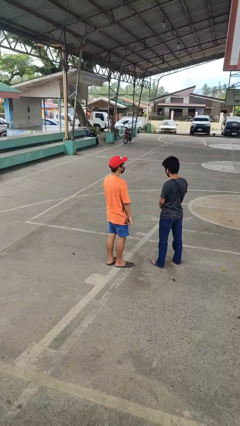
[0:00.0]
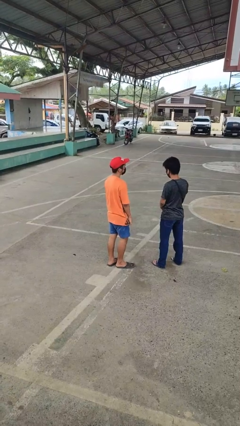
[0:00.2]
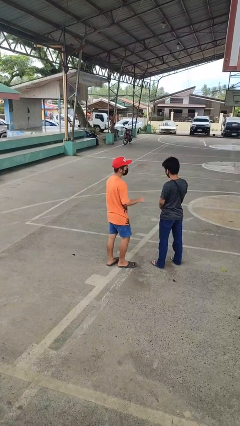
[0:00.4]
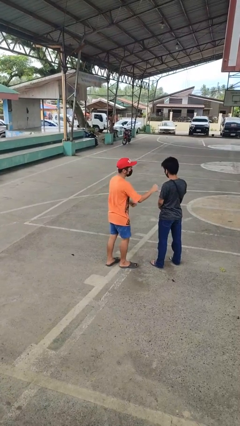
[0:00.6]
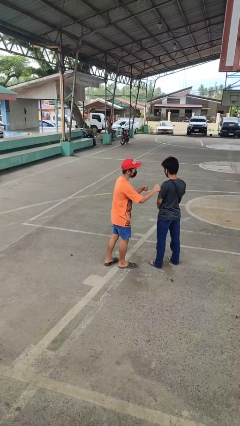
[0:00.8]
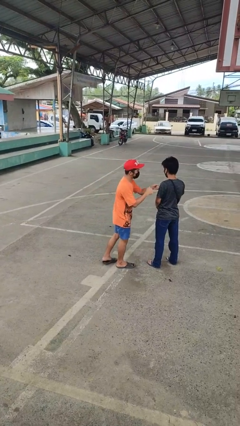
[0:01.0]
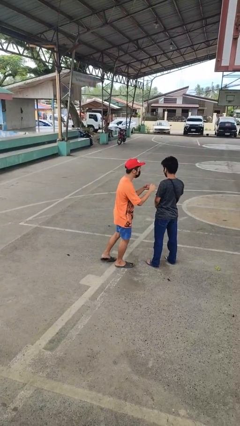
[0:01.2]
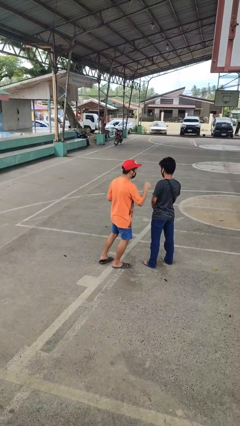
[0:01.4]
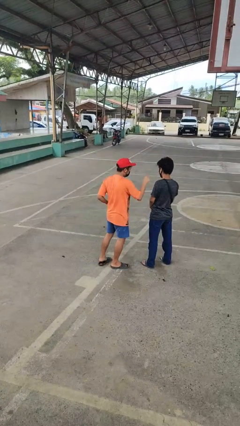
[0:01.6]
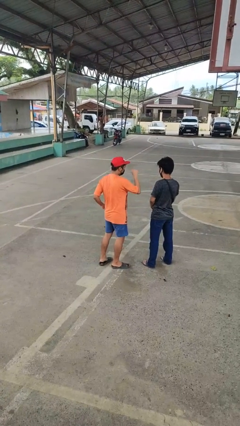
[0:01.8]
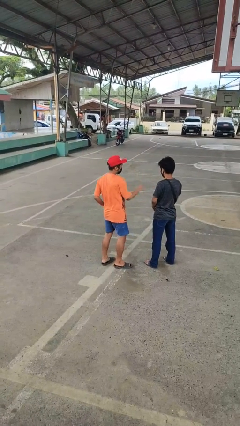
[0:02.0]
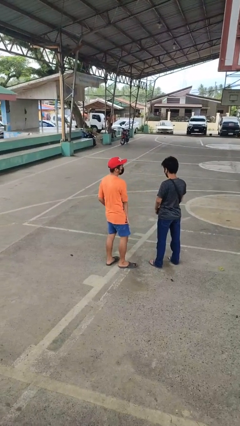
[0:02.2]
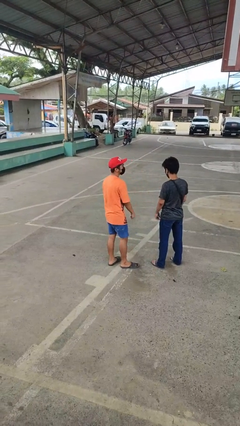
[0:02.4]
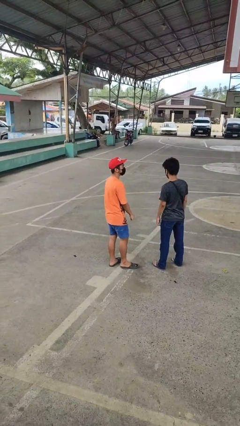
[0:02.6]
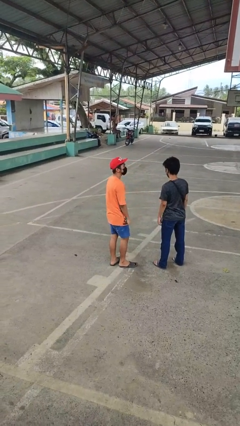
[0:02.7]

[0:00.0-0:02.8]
person pounds shoulders of person

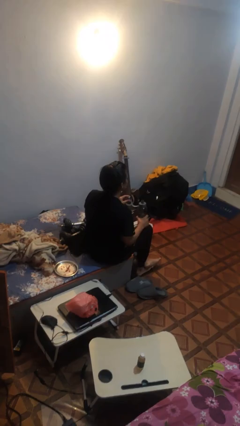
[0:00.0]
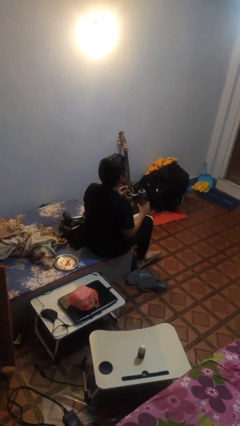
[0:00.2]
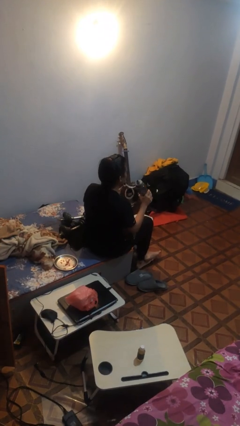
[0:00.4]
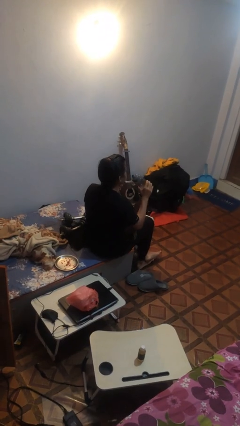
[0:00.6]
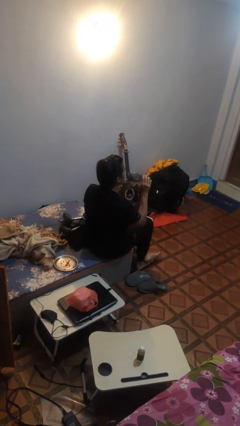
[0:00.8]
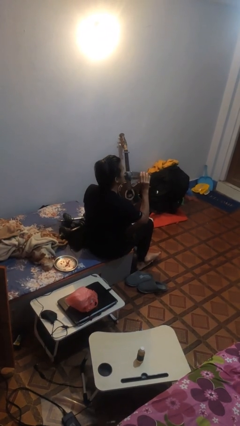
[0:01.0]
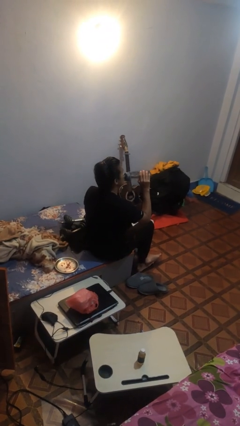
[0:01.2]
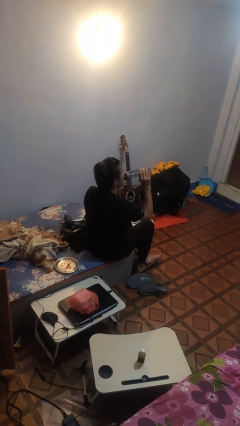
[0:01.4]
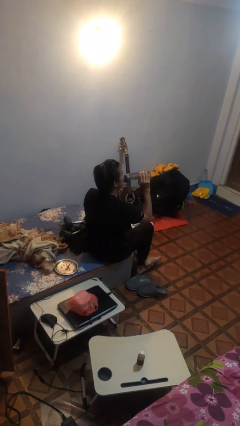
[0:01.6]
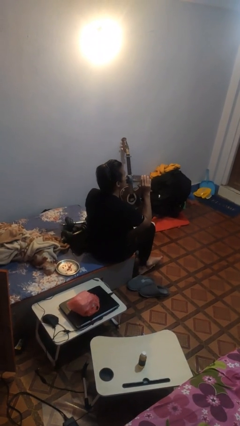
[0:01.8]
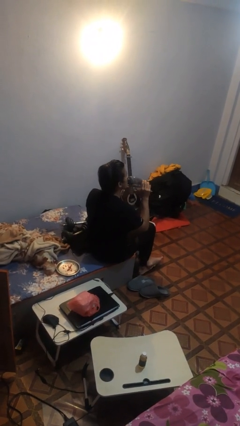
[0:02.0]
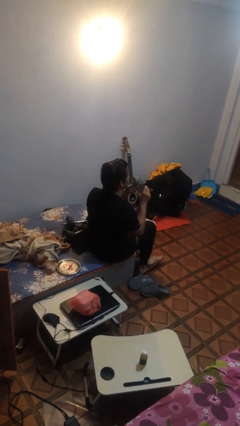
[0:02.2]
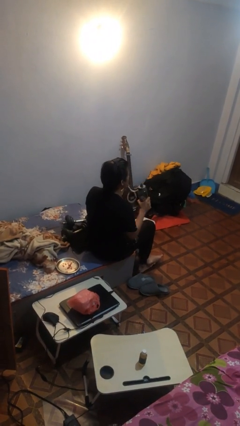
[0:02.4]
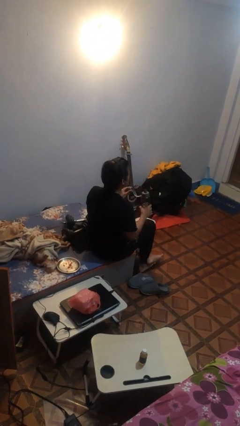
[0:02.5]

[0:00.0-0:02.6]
person drinks from bottle

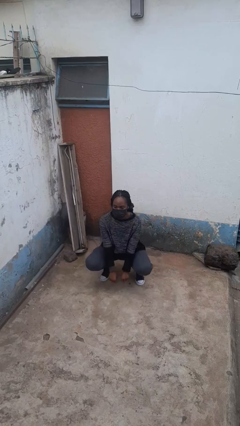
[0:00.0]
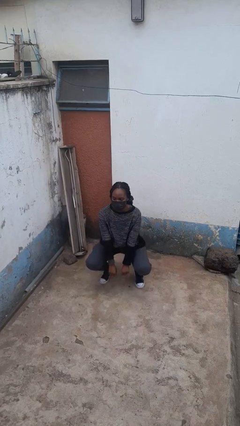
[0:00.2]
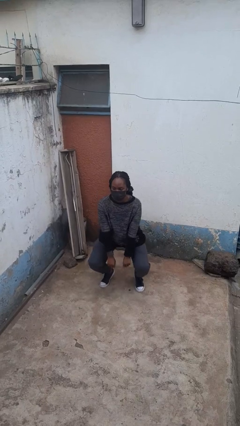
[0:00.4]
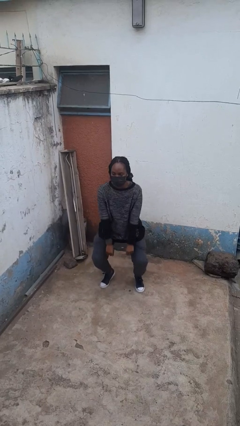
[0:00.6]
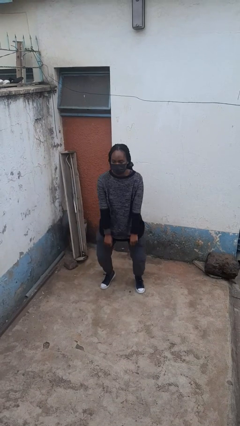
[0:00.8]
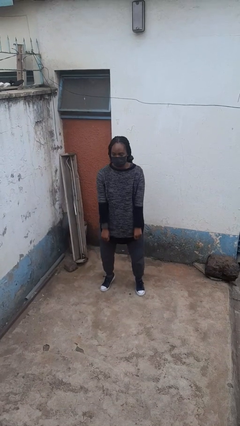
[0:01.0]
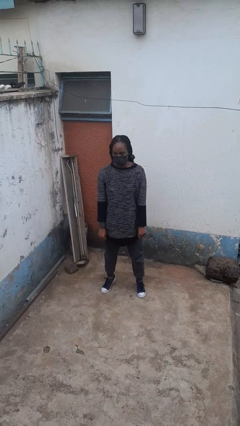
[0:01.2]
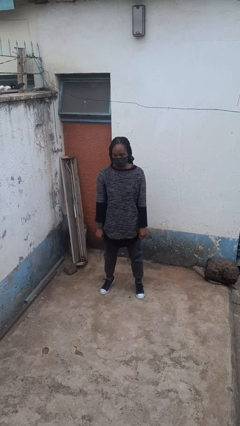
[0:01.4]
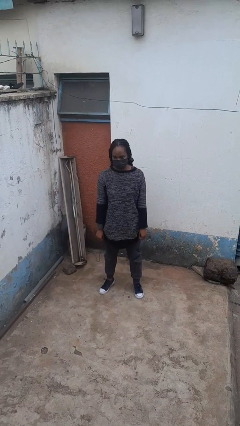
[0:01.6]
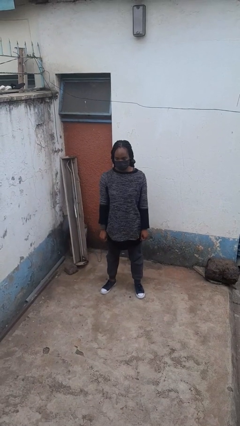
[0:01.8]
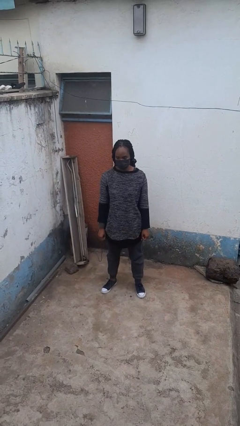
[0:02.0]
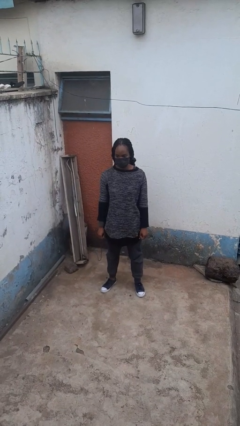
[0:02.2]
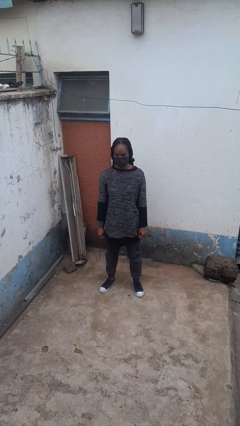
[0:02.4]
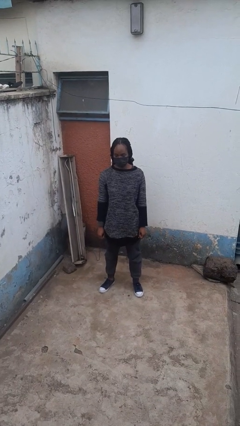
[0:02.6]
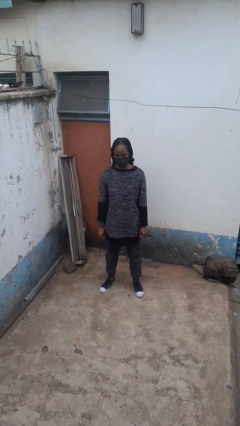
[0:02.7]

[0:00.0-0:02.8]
person stands up

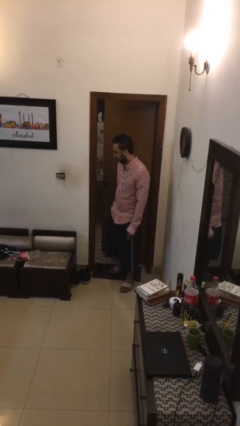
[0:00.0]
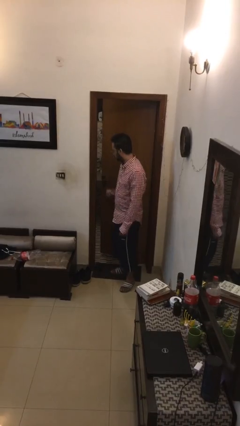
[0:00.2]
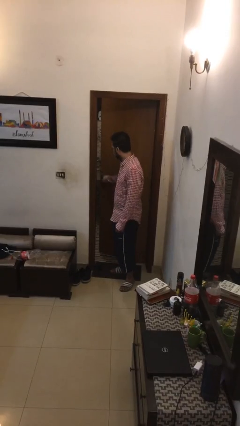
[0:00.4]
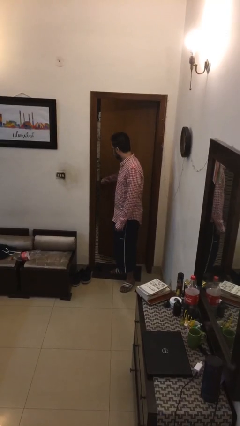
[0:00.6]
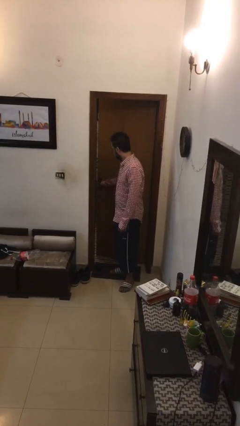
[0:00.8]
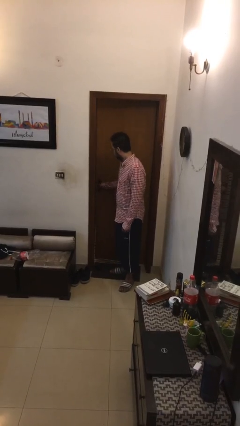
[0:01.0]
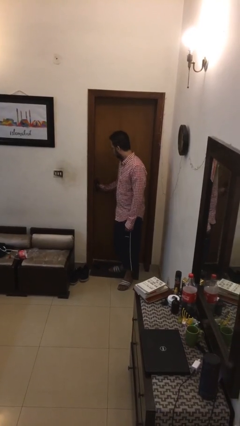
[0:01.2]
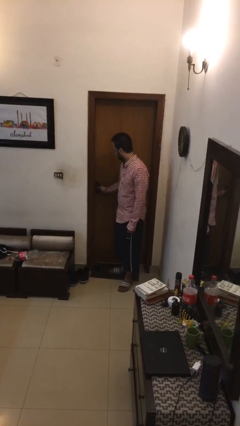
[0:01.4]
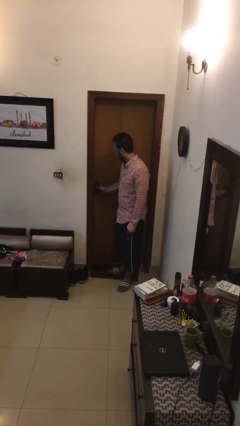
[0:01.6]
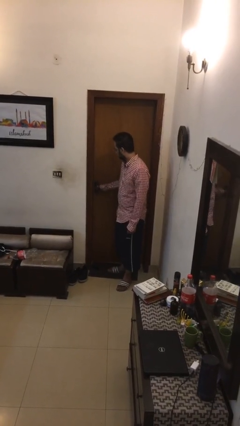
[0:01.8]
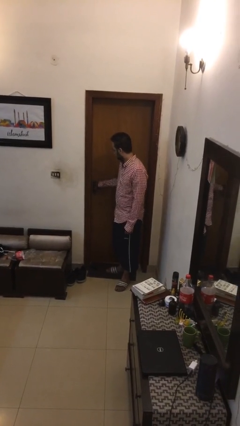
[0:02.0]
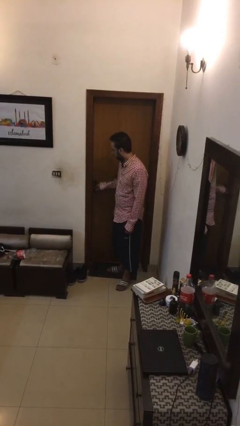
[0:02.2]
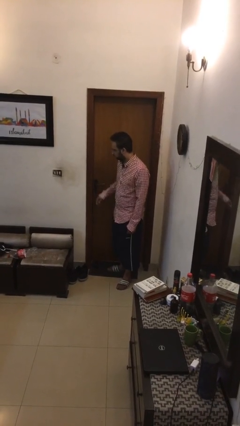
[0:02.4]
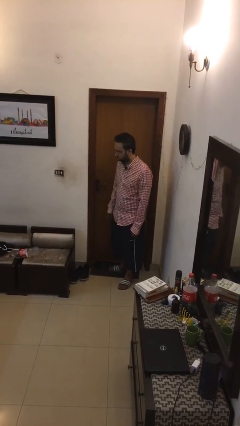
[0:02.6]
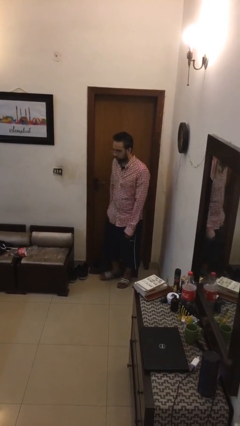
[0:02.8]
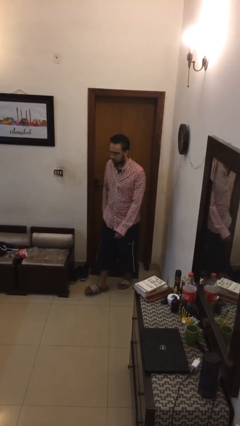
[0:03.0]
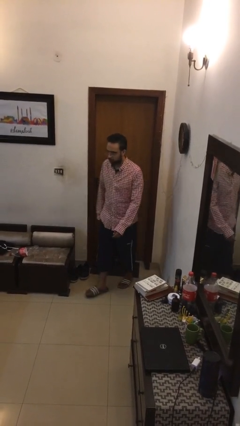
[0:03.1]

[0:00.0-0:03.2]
person closes facility door

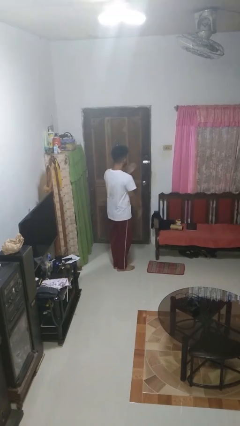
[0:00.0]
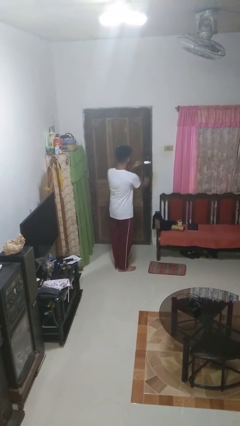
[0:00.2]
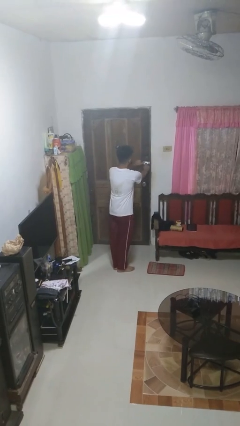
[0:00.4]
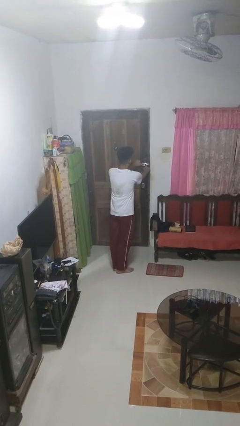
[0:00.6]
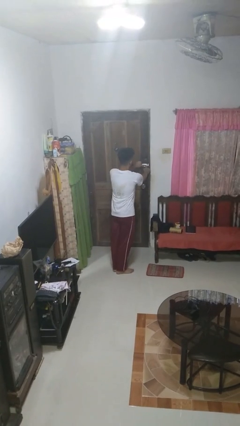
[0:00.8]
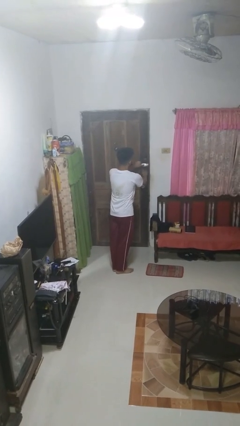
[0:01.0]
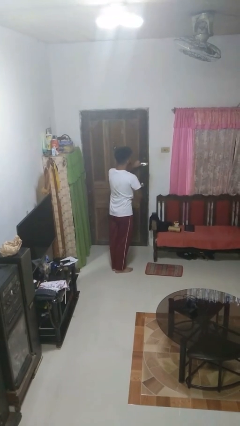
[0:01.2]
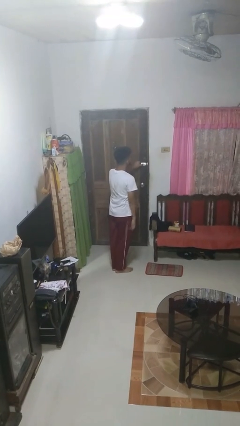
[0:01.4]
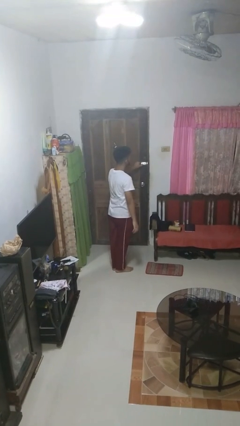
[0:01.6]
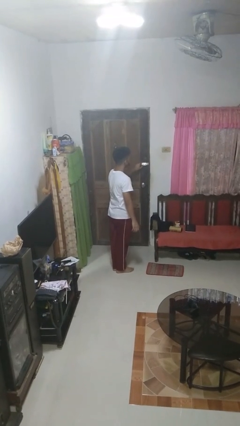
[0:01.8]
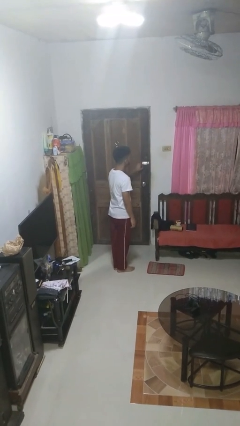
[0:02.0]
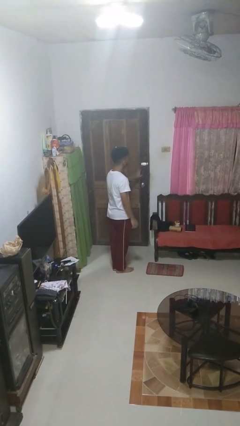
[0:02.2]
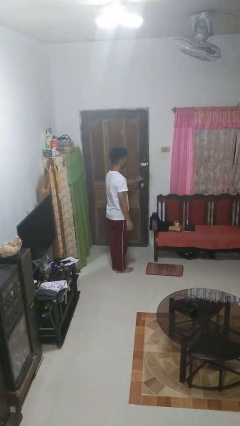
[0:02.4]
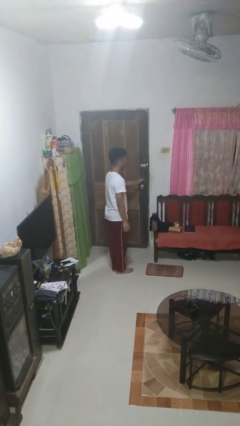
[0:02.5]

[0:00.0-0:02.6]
person unlocks door with keys

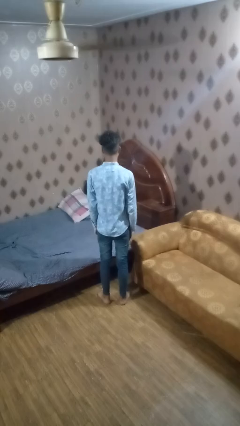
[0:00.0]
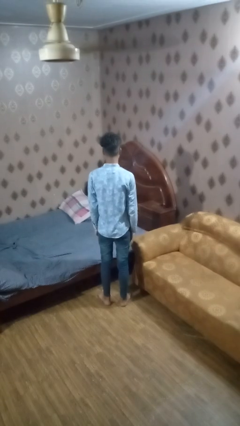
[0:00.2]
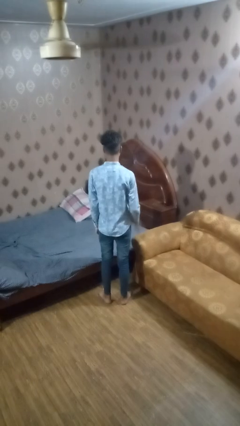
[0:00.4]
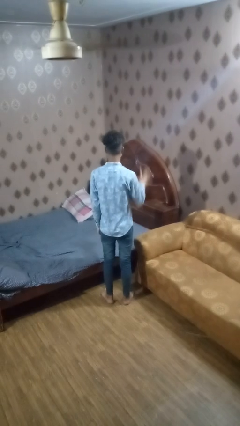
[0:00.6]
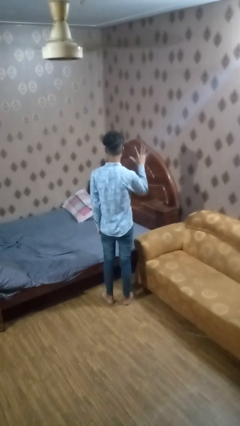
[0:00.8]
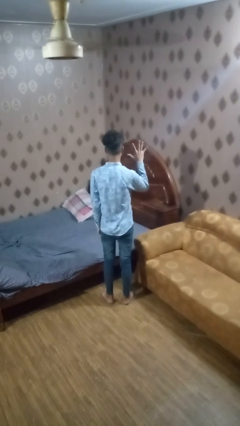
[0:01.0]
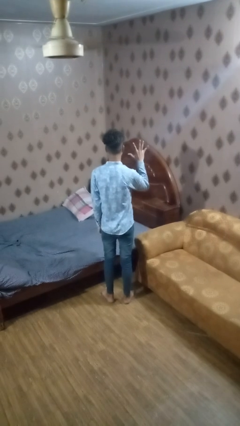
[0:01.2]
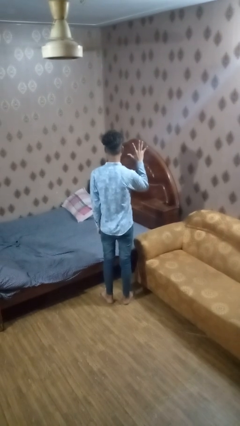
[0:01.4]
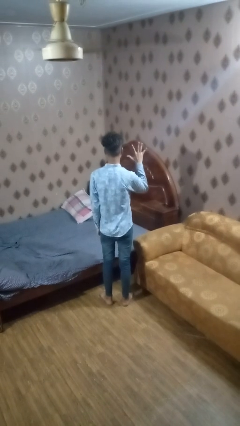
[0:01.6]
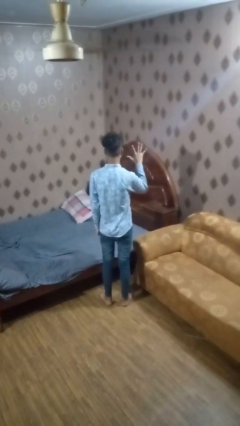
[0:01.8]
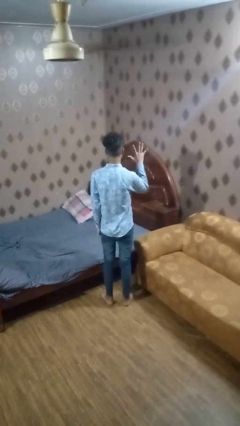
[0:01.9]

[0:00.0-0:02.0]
person gestures number five

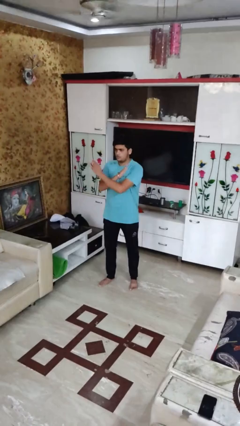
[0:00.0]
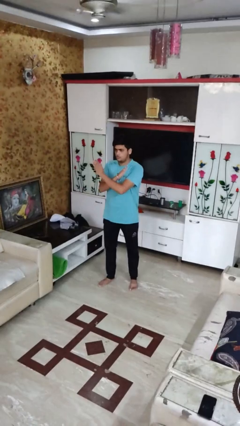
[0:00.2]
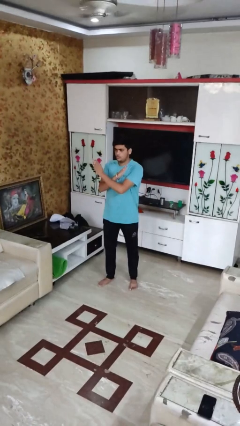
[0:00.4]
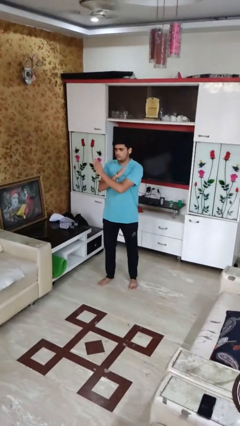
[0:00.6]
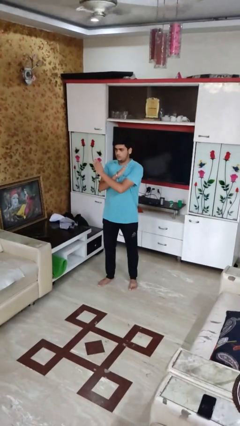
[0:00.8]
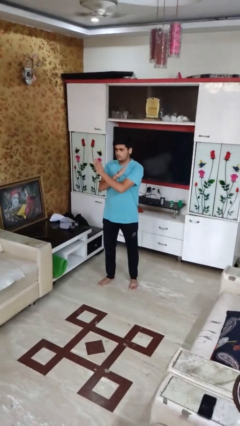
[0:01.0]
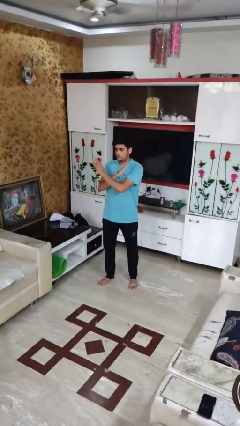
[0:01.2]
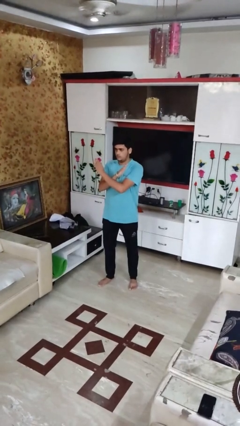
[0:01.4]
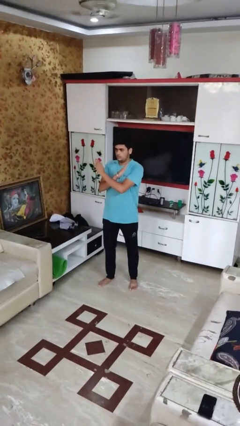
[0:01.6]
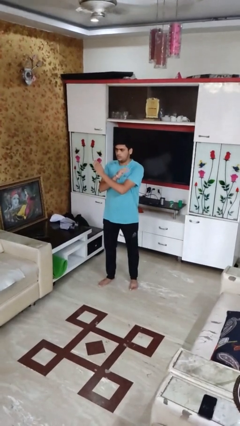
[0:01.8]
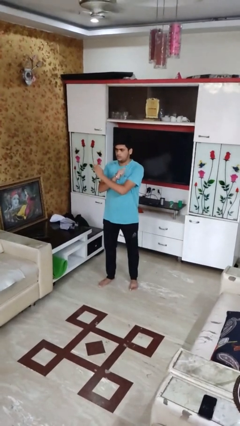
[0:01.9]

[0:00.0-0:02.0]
person gestures arms x
